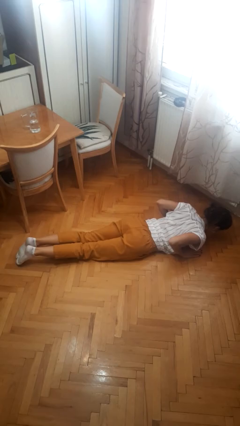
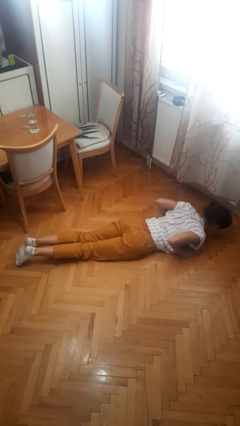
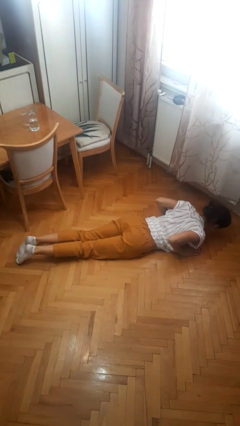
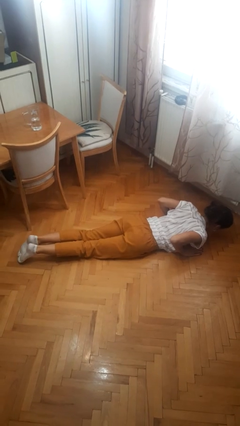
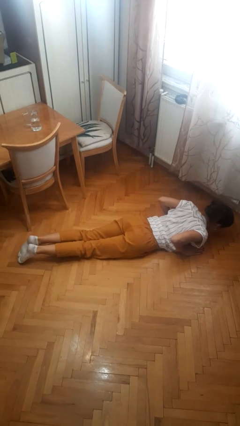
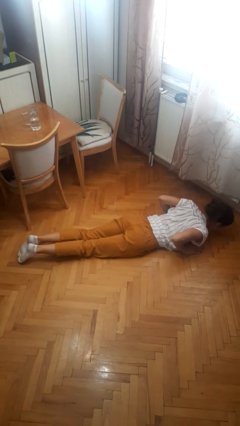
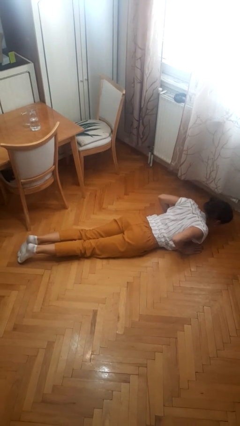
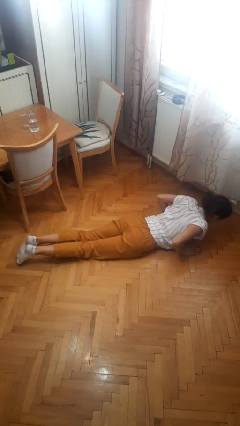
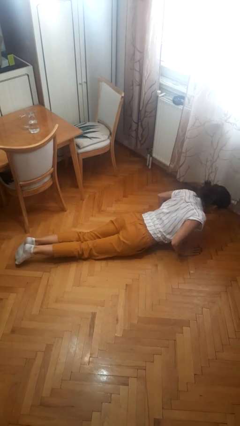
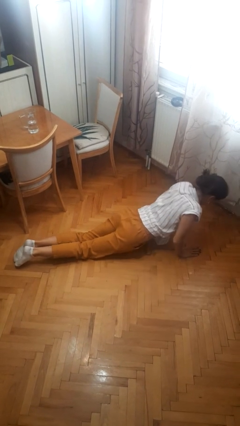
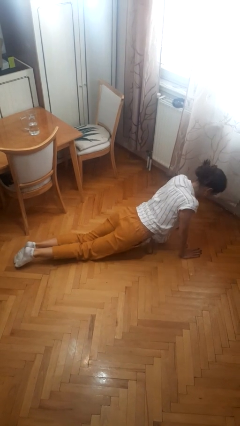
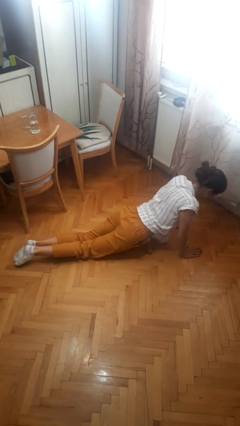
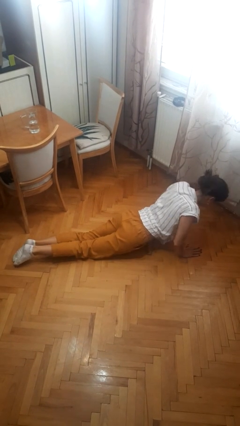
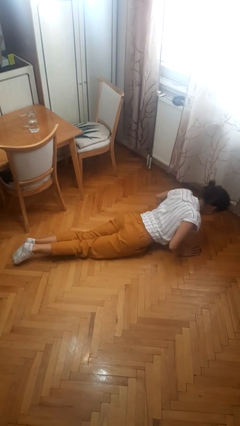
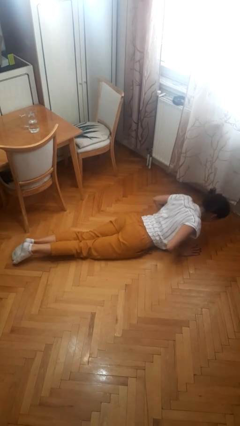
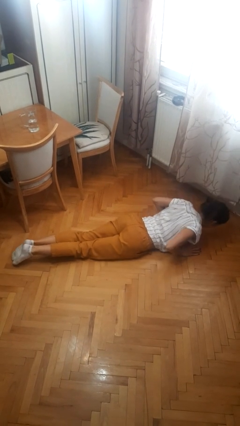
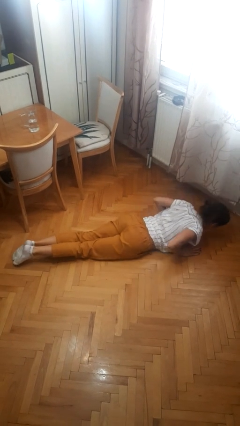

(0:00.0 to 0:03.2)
person exercises with pushup

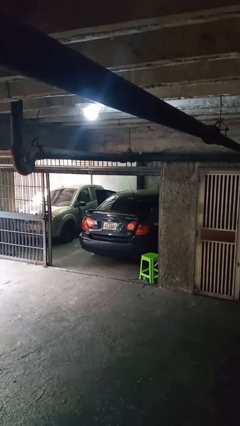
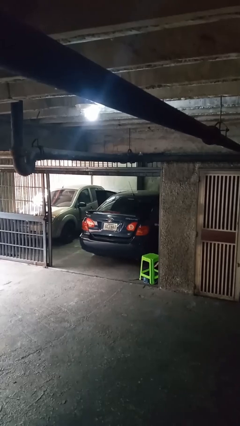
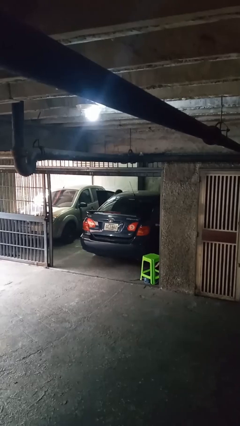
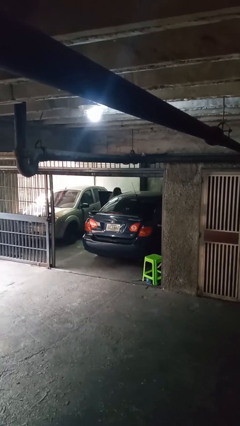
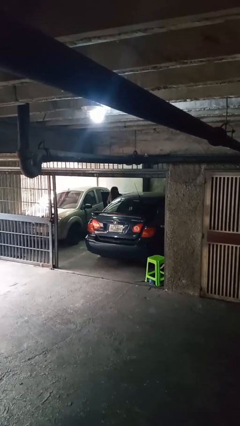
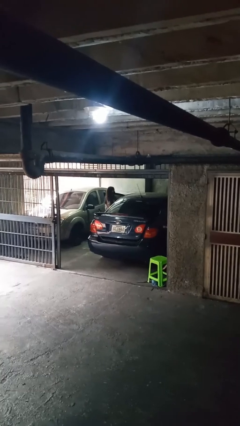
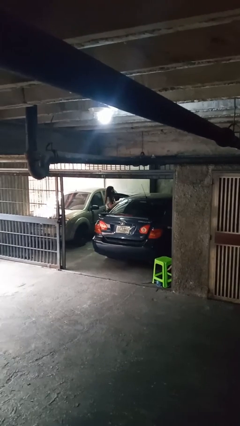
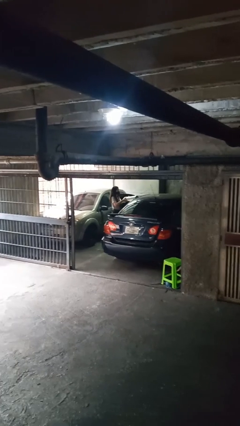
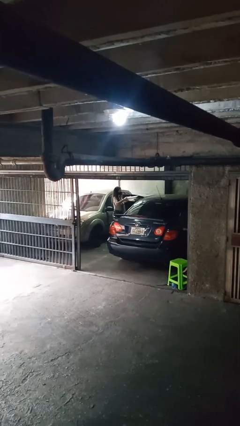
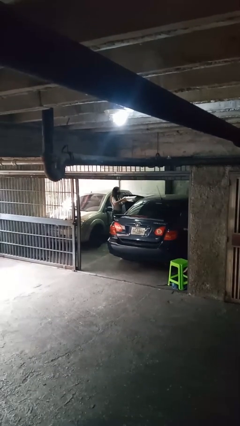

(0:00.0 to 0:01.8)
person unloads car

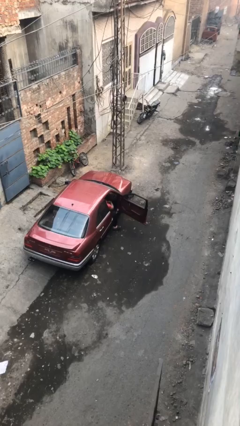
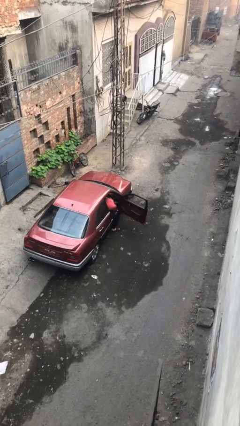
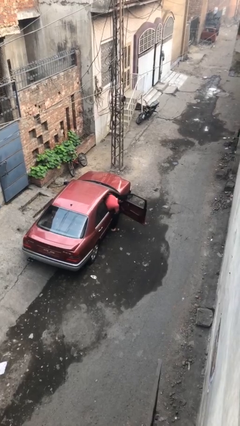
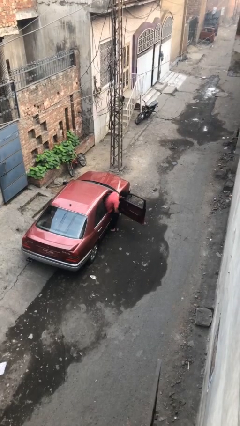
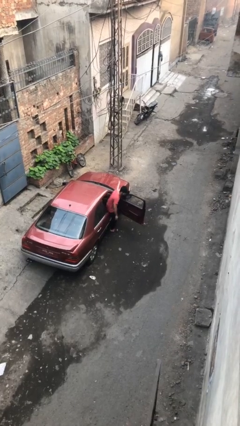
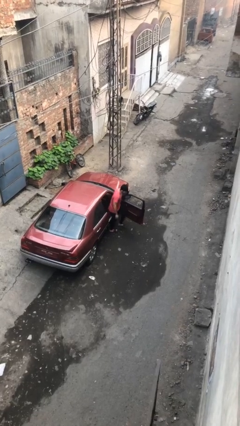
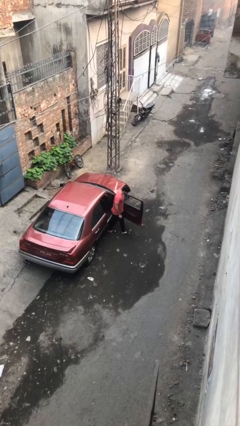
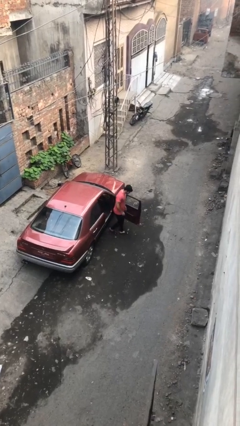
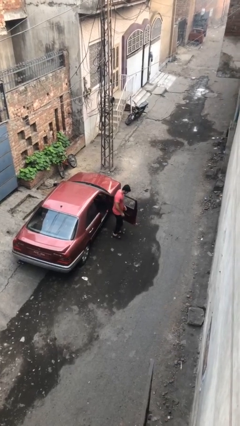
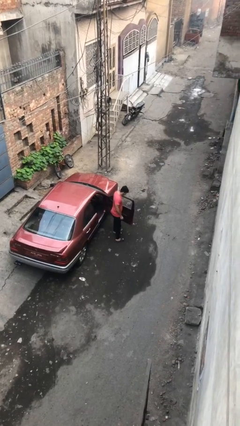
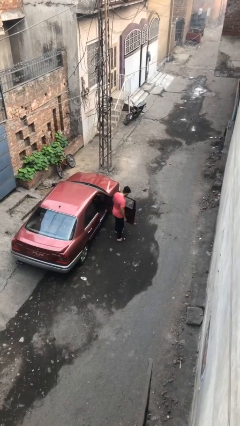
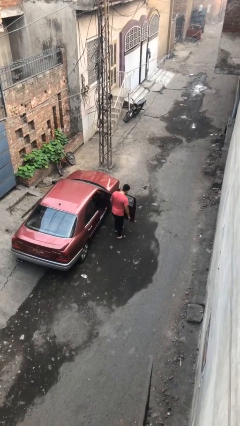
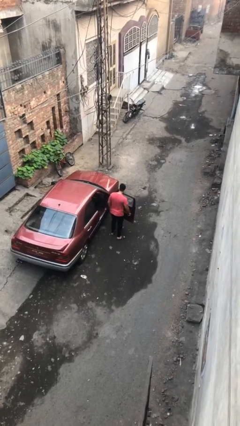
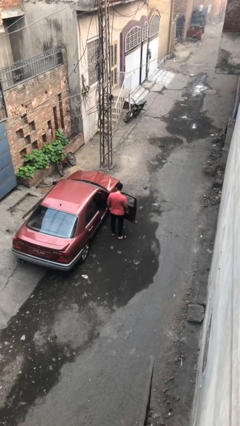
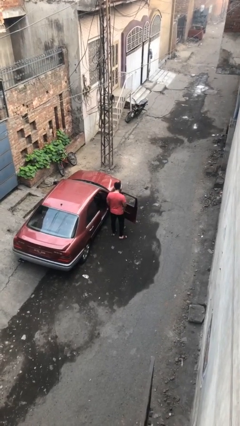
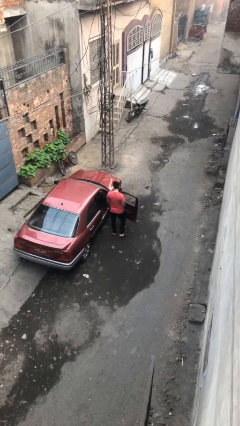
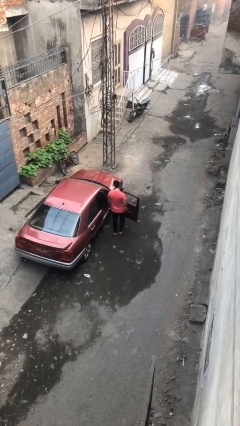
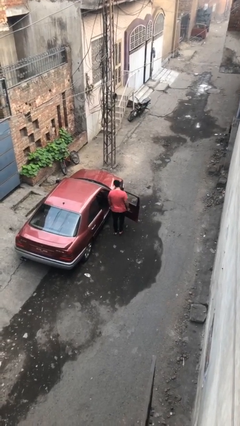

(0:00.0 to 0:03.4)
person exits car

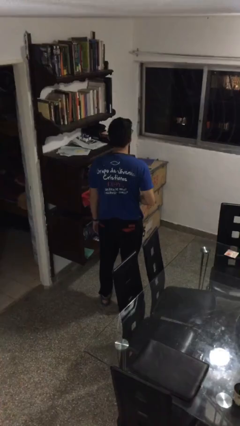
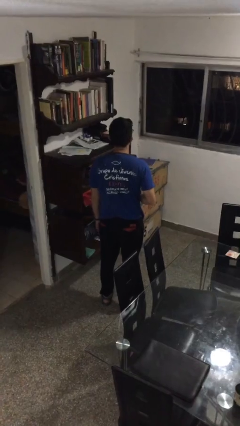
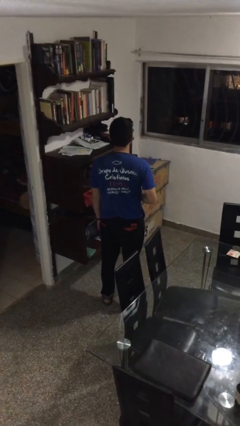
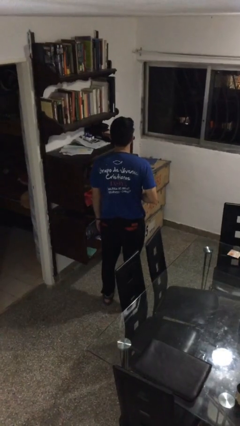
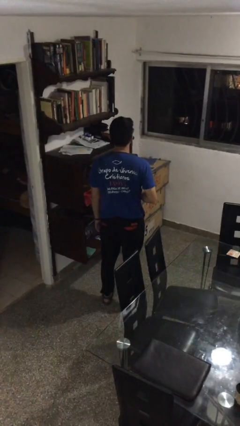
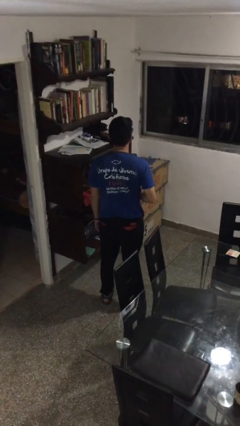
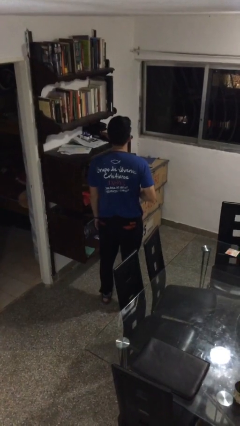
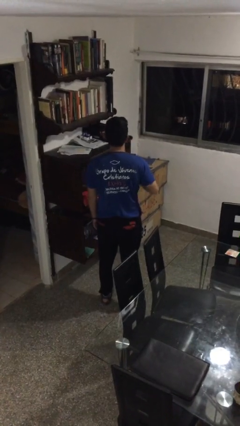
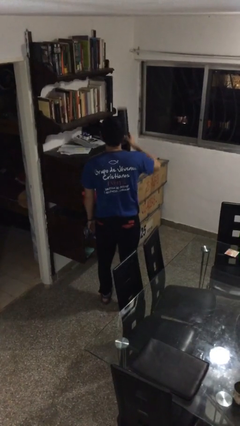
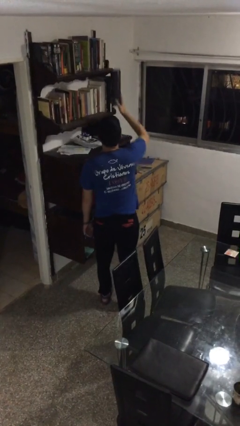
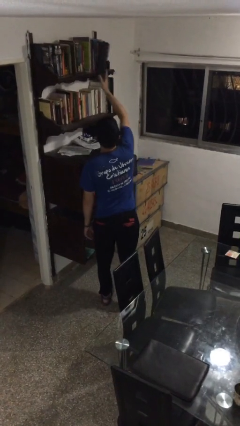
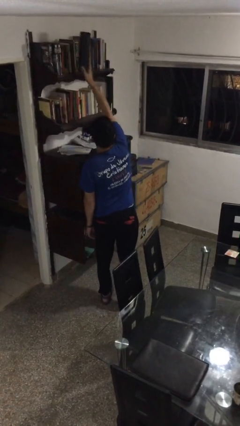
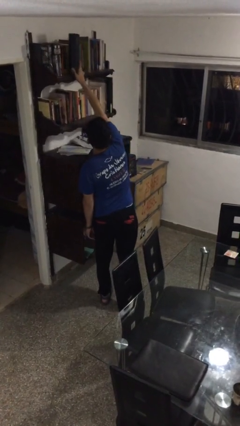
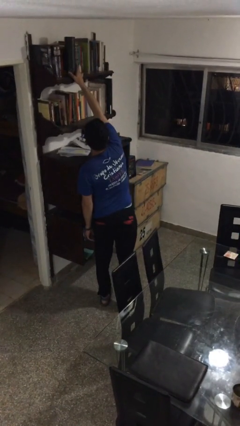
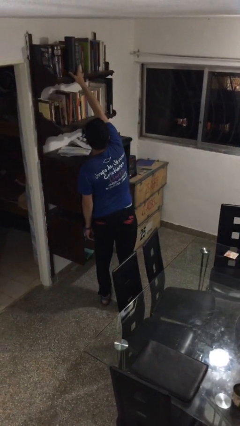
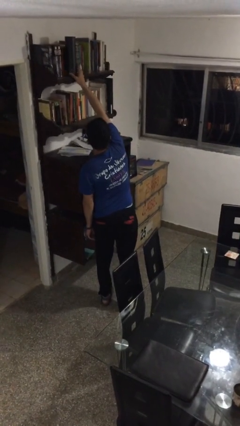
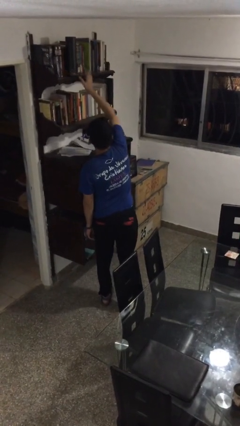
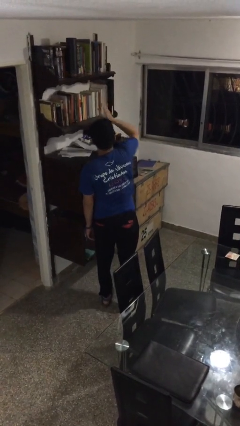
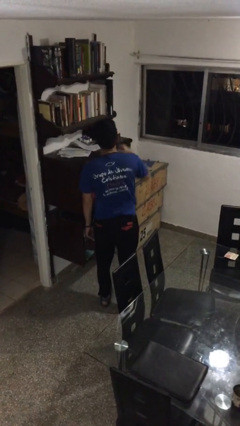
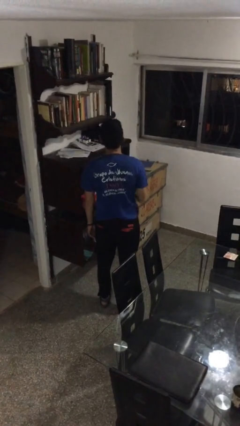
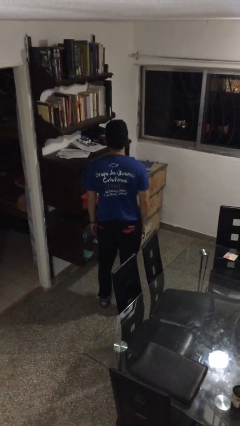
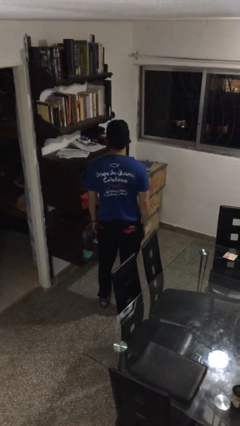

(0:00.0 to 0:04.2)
person puts down object on shelf

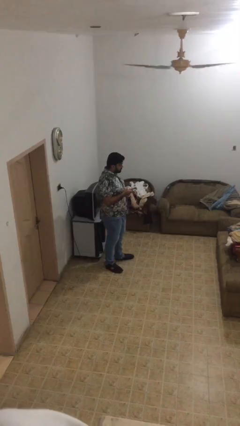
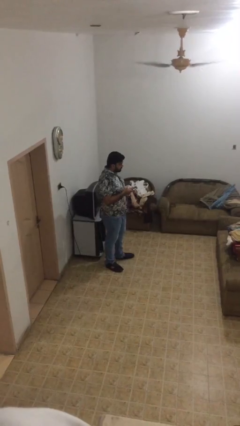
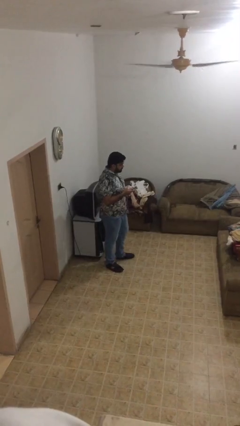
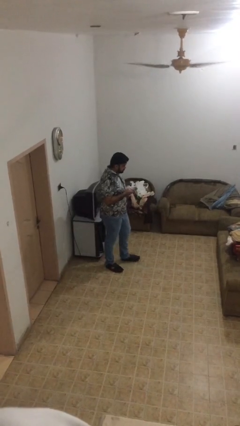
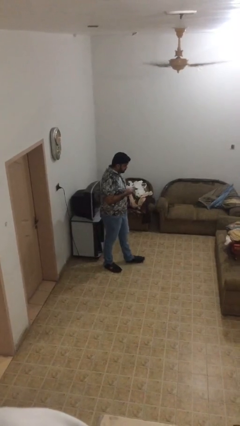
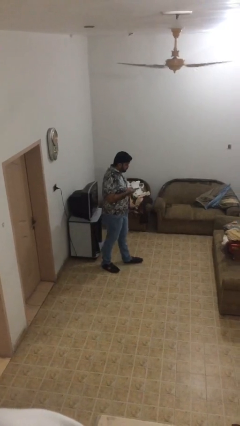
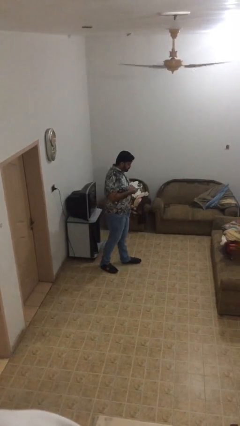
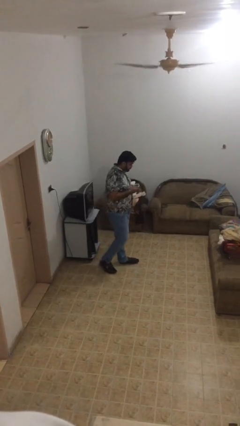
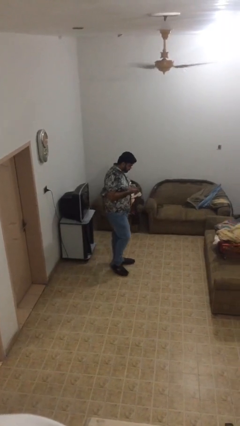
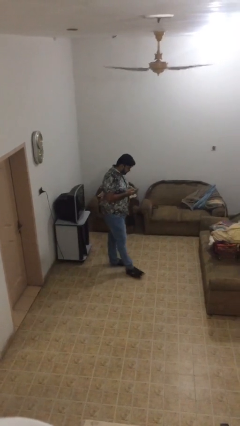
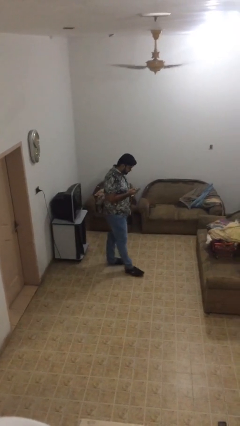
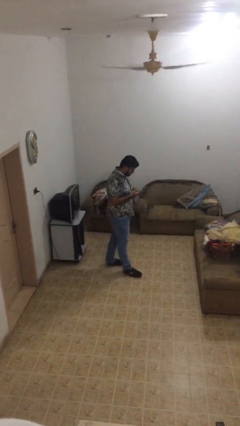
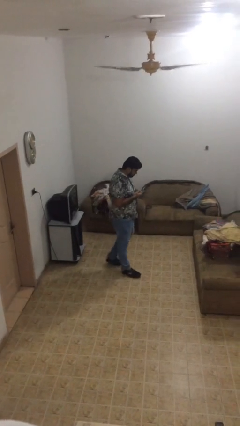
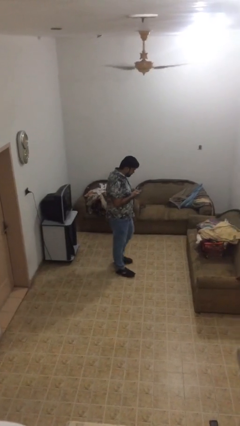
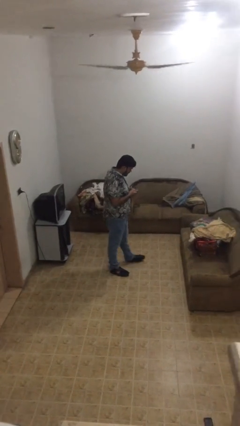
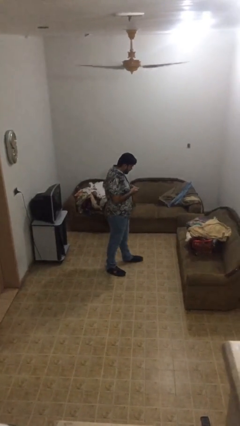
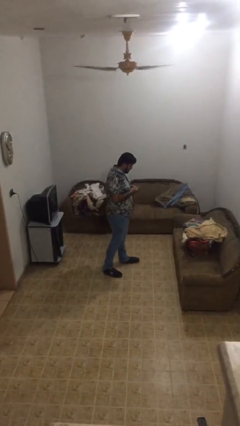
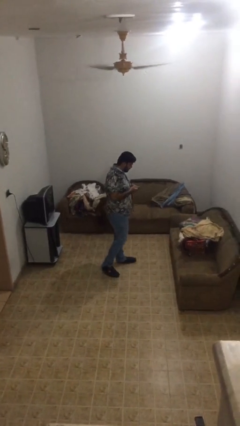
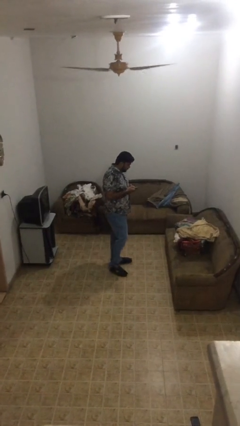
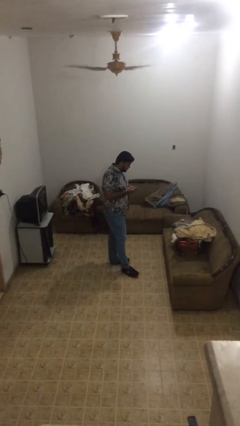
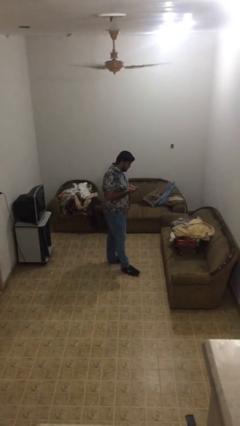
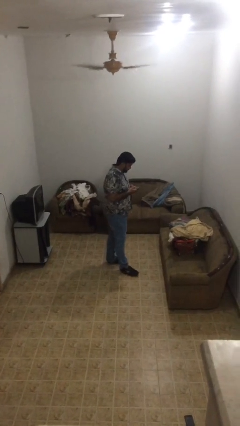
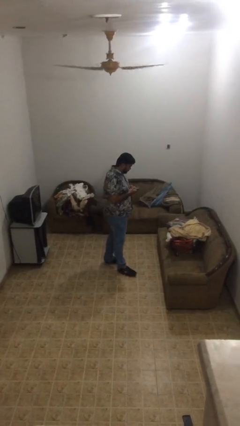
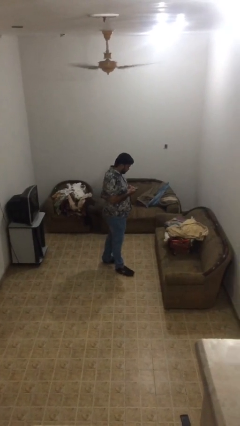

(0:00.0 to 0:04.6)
person texts on phone

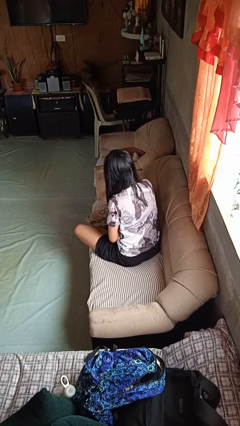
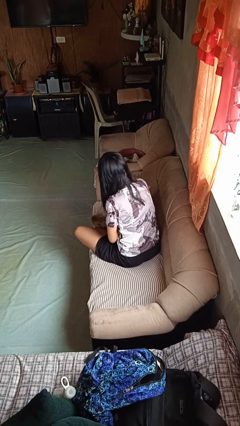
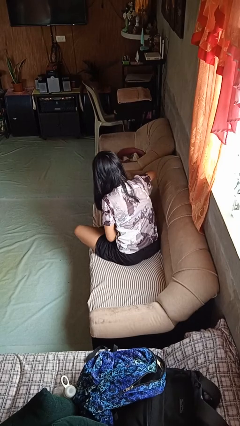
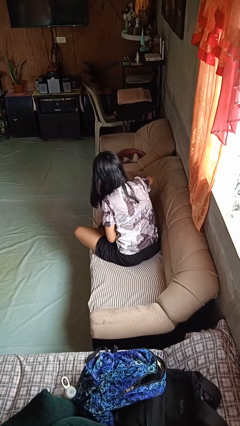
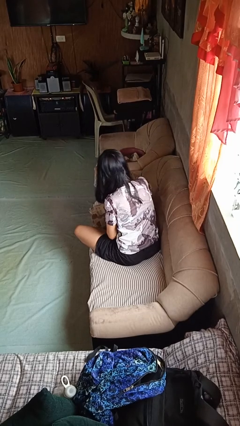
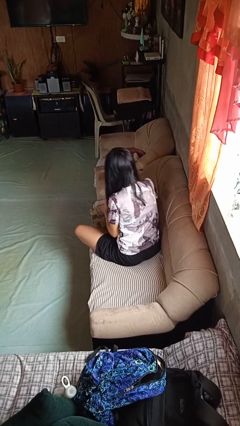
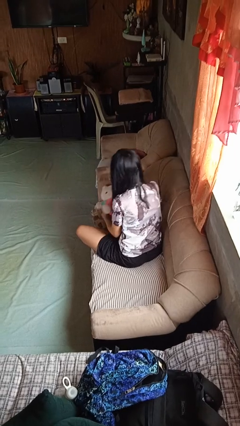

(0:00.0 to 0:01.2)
person searches in couch
